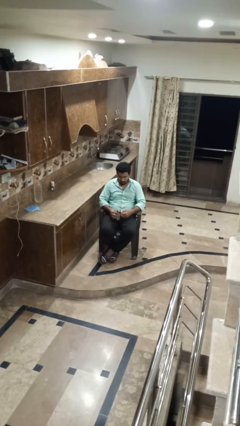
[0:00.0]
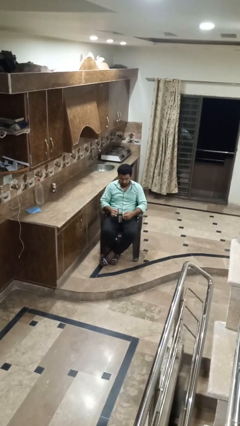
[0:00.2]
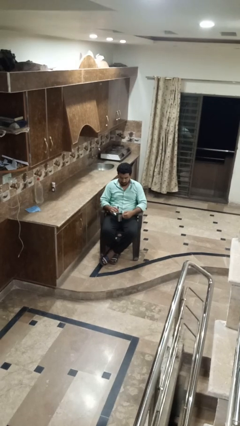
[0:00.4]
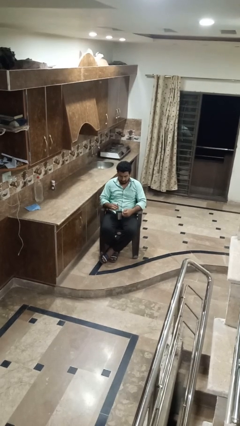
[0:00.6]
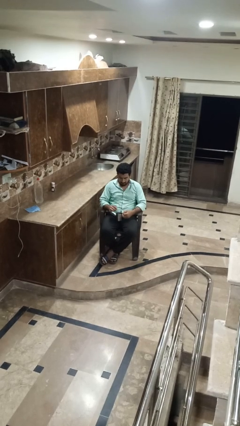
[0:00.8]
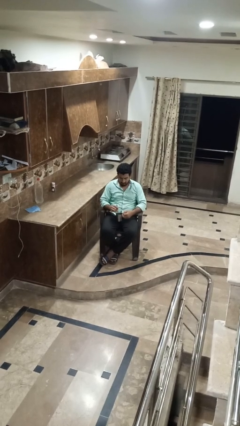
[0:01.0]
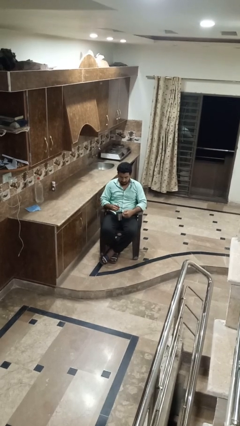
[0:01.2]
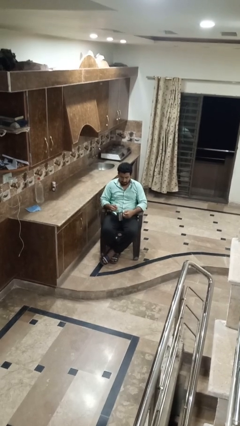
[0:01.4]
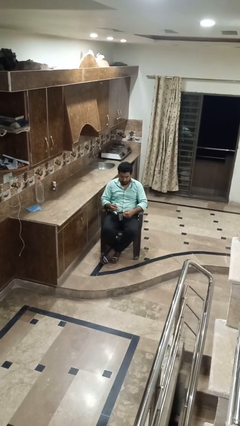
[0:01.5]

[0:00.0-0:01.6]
person stirs mug

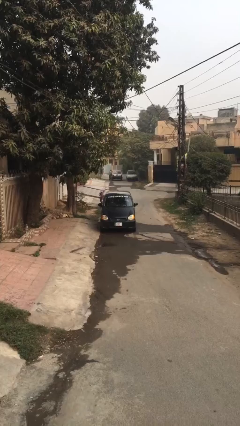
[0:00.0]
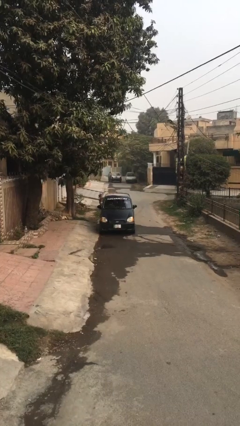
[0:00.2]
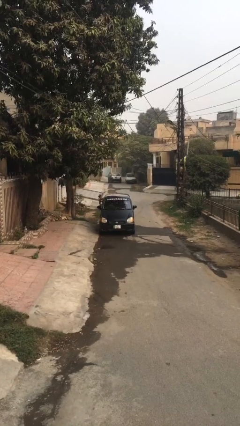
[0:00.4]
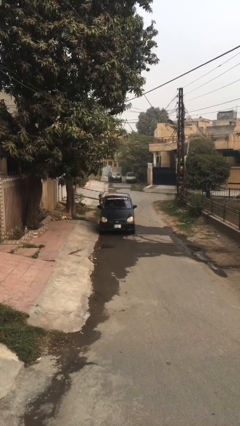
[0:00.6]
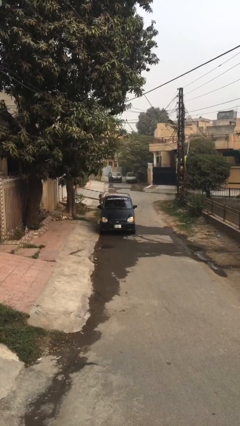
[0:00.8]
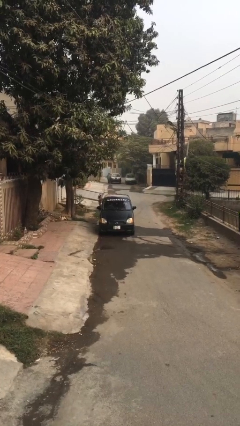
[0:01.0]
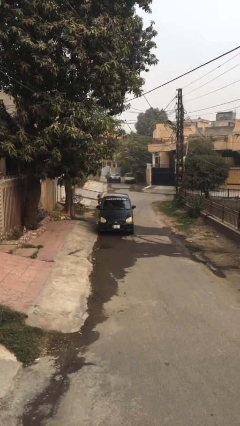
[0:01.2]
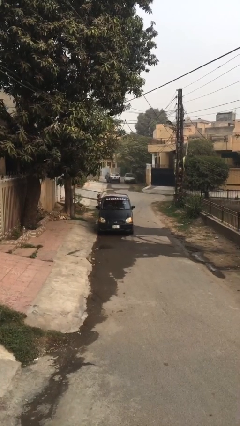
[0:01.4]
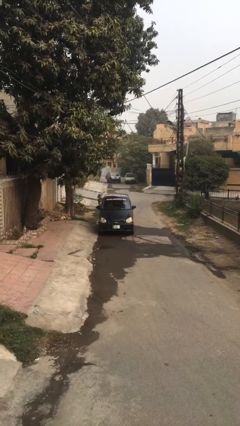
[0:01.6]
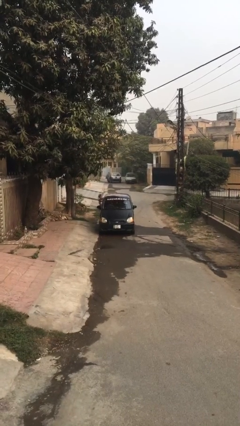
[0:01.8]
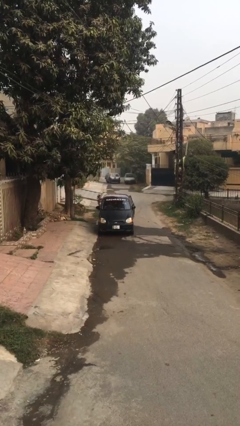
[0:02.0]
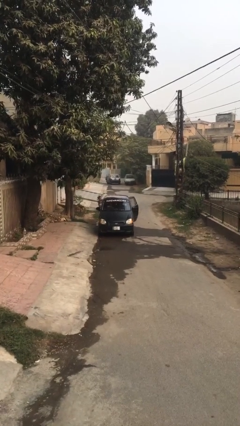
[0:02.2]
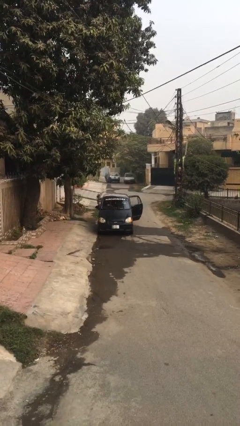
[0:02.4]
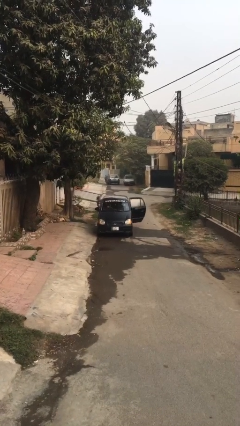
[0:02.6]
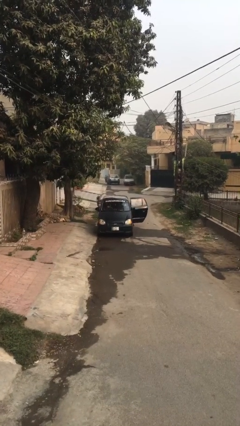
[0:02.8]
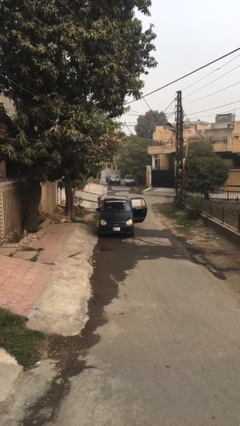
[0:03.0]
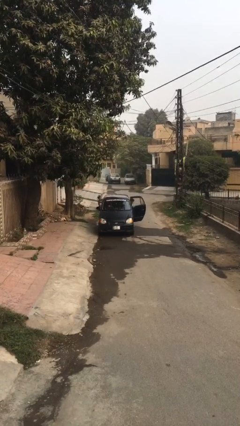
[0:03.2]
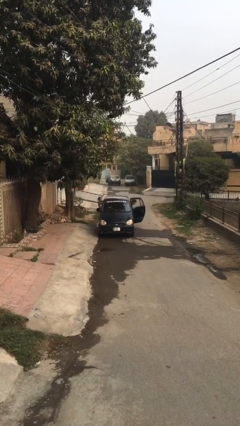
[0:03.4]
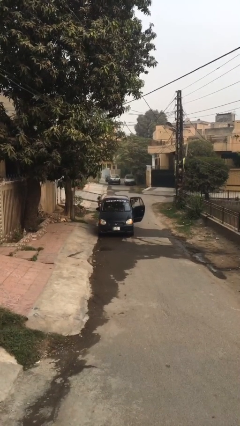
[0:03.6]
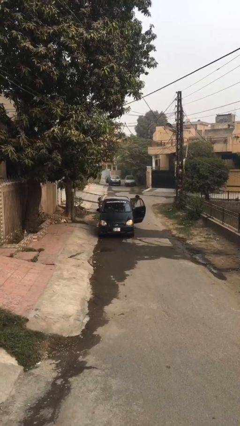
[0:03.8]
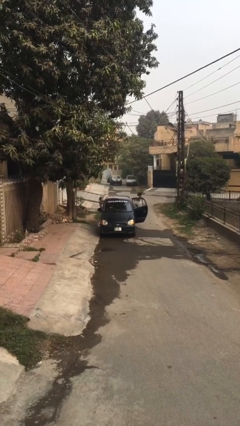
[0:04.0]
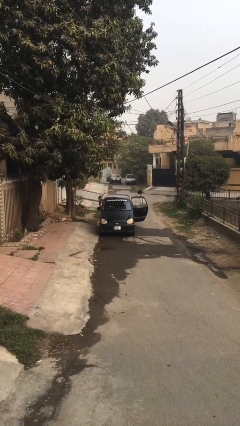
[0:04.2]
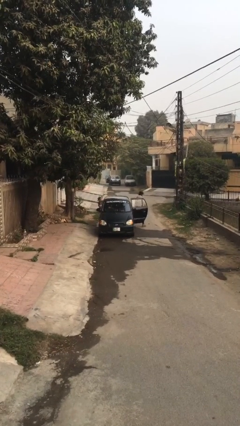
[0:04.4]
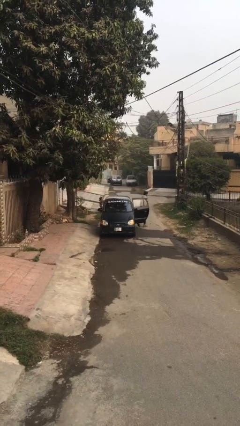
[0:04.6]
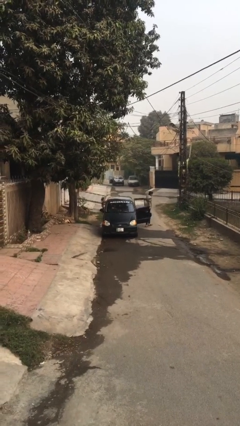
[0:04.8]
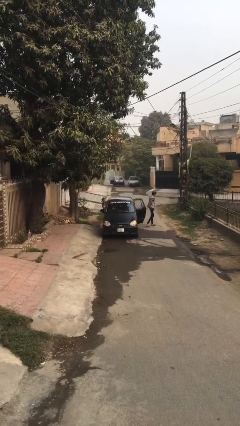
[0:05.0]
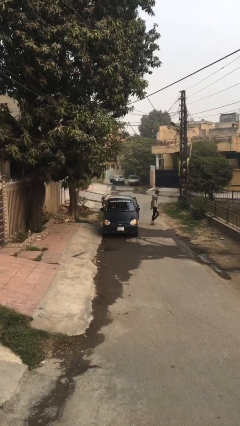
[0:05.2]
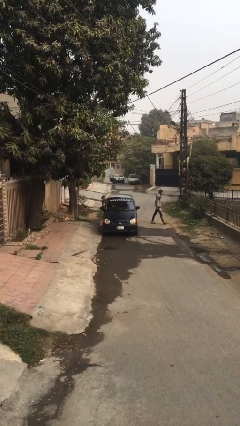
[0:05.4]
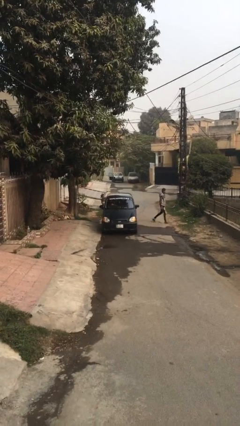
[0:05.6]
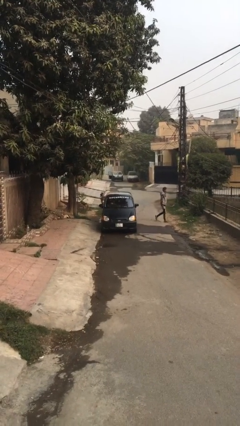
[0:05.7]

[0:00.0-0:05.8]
car drops off person

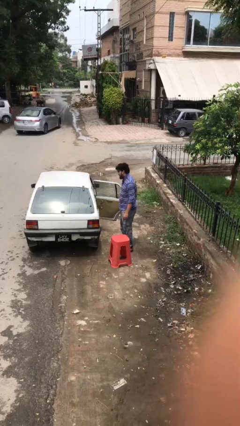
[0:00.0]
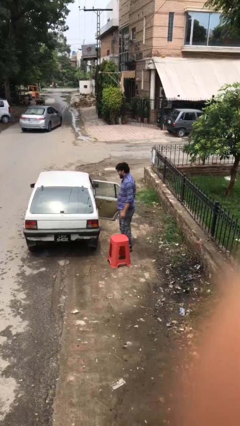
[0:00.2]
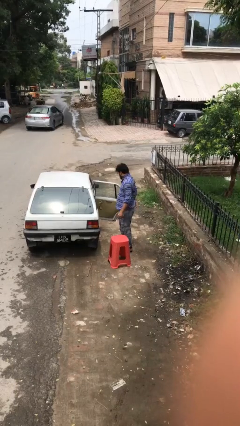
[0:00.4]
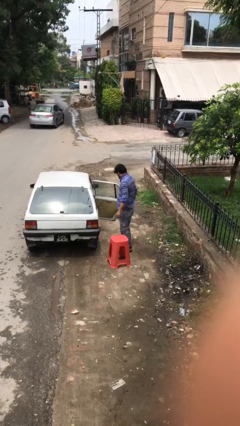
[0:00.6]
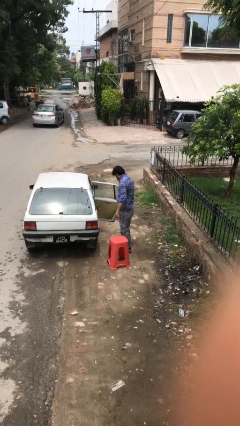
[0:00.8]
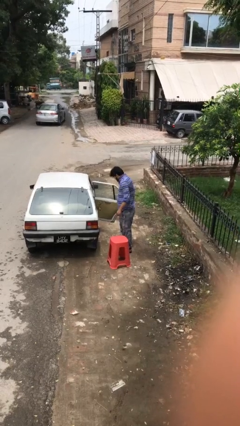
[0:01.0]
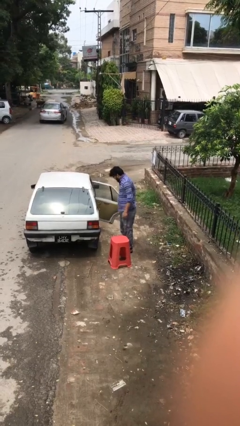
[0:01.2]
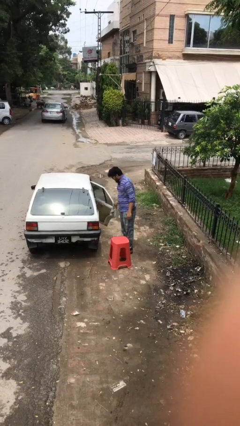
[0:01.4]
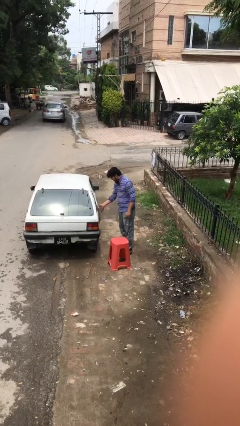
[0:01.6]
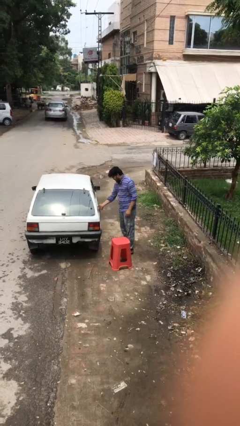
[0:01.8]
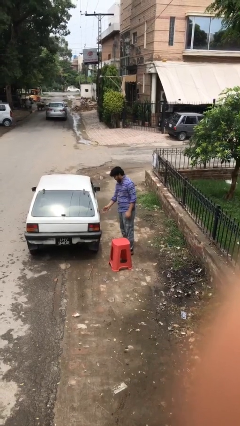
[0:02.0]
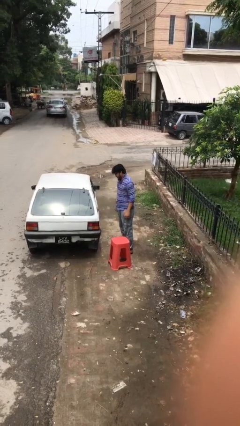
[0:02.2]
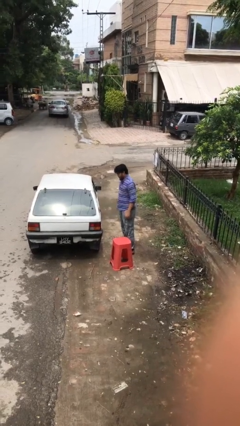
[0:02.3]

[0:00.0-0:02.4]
person closes car door

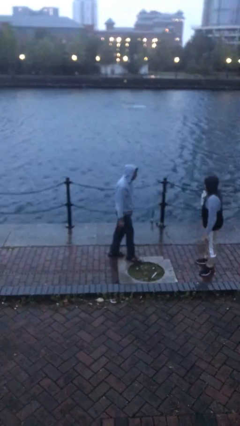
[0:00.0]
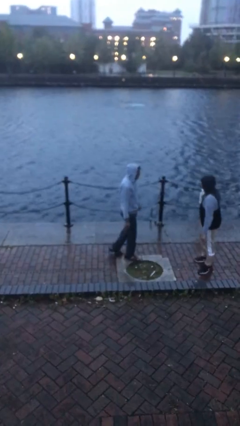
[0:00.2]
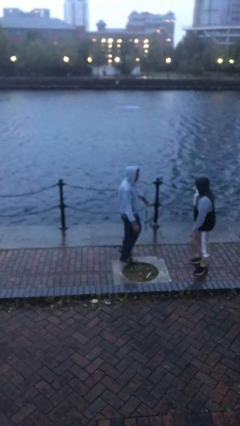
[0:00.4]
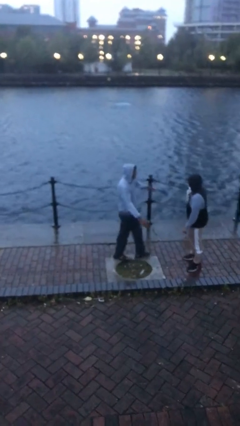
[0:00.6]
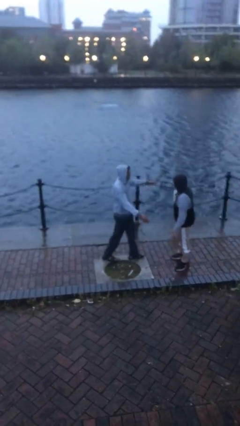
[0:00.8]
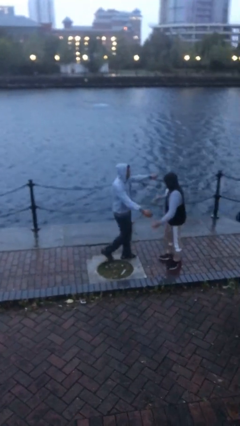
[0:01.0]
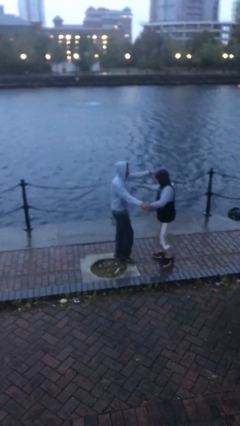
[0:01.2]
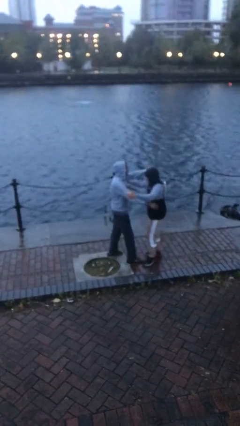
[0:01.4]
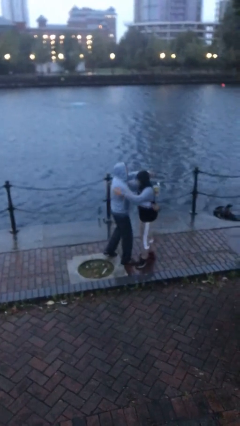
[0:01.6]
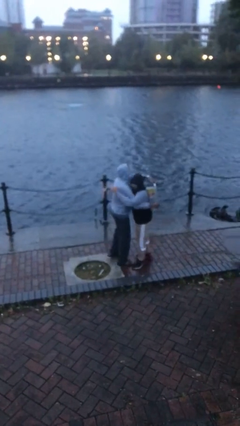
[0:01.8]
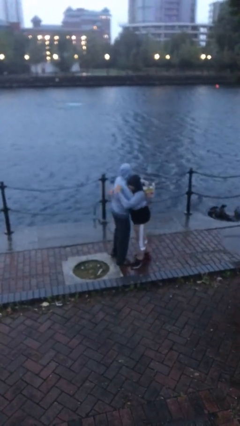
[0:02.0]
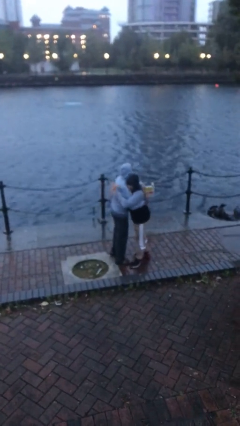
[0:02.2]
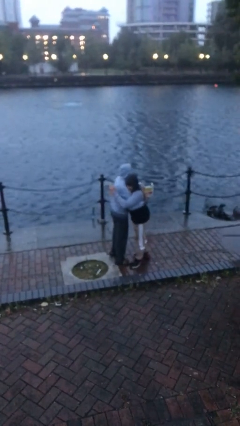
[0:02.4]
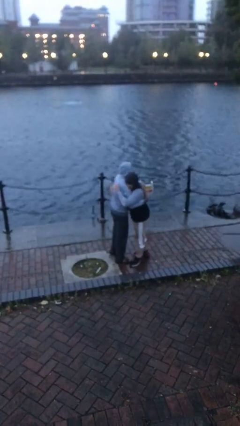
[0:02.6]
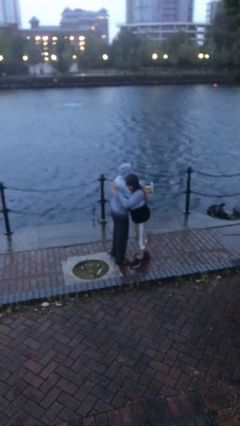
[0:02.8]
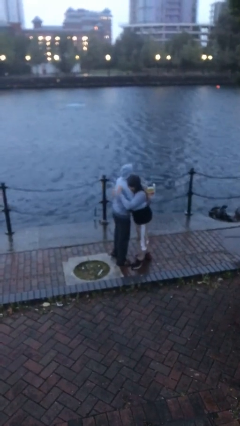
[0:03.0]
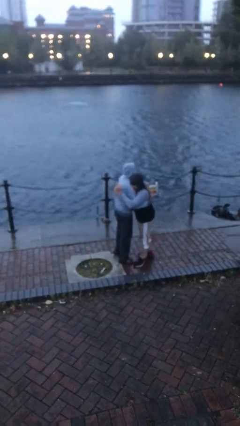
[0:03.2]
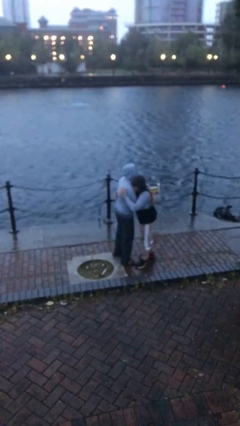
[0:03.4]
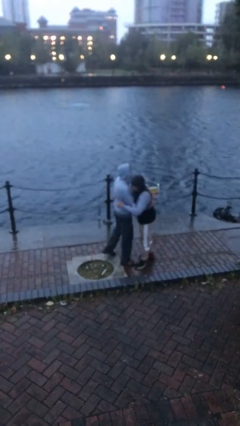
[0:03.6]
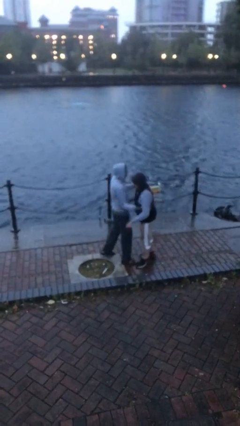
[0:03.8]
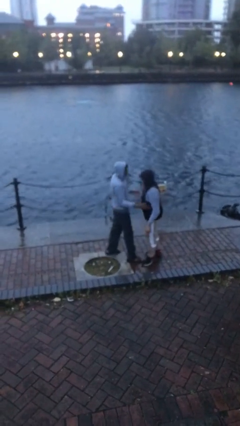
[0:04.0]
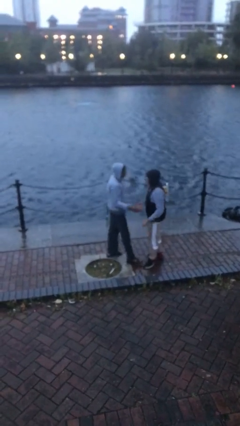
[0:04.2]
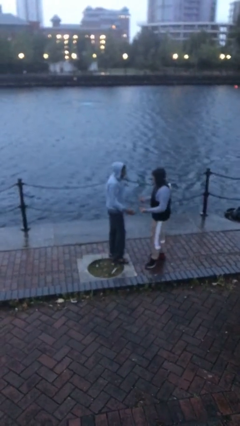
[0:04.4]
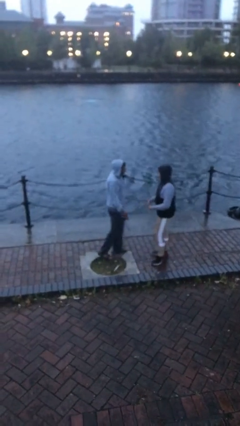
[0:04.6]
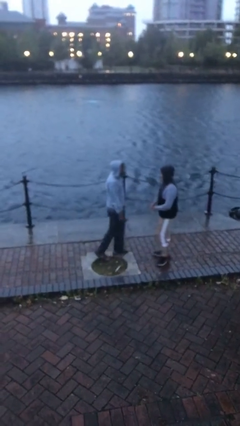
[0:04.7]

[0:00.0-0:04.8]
person embraces person

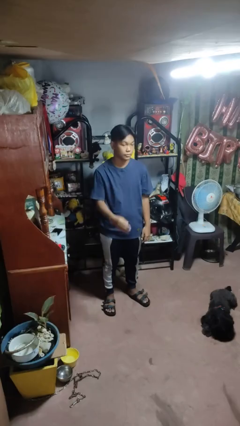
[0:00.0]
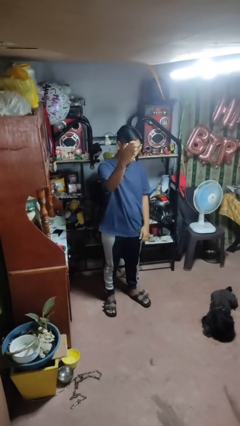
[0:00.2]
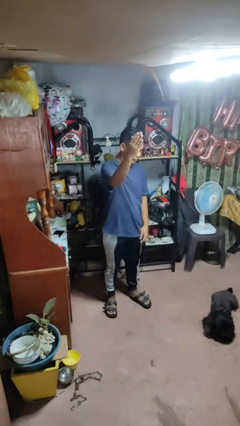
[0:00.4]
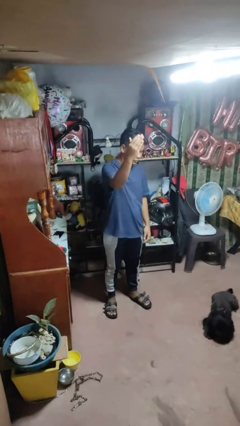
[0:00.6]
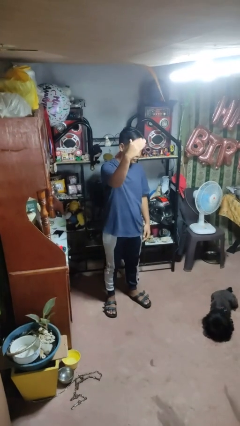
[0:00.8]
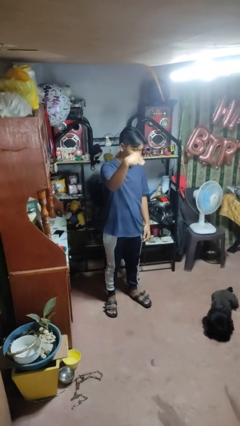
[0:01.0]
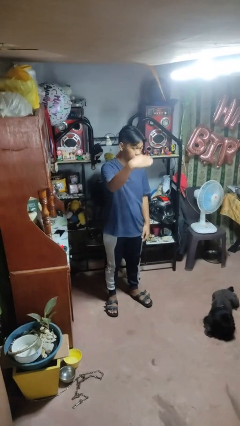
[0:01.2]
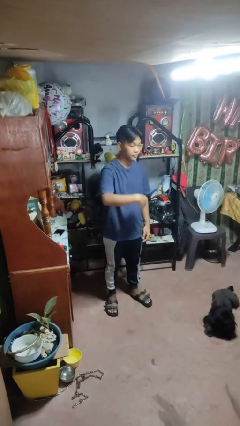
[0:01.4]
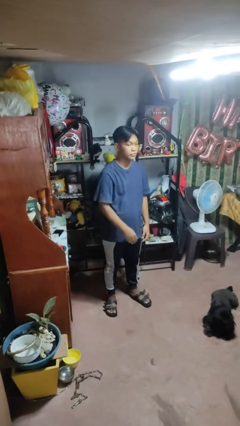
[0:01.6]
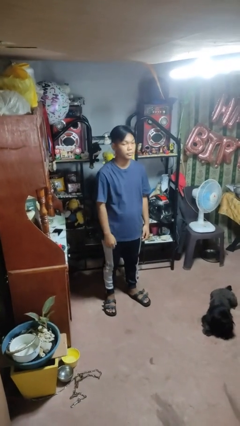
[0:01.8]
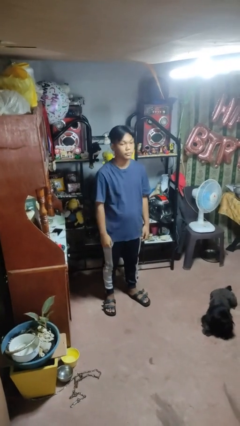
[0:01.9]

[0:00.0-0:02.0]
person gestures come here

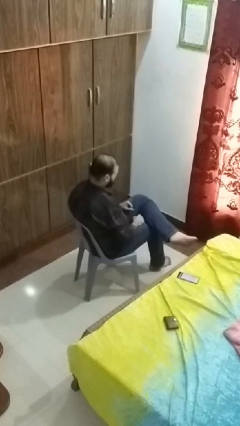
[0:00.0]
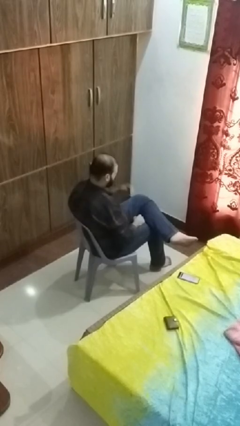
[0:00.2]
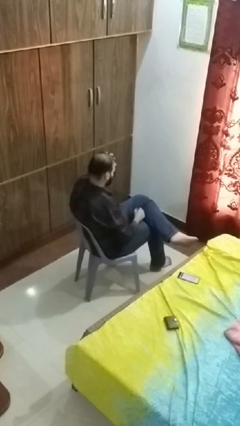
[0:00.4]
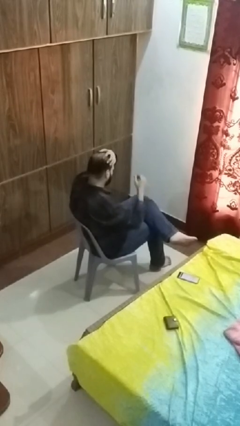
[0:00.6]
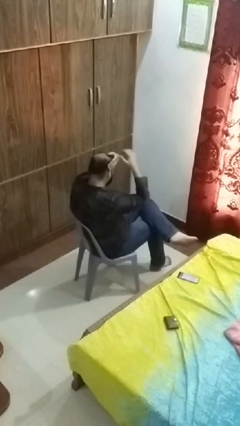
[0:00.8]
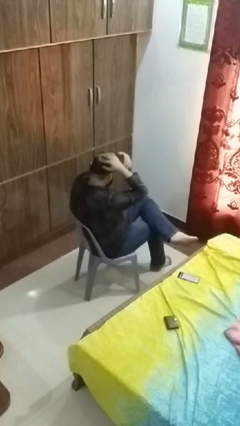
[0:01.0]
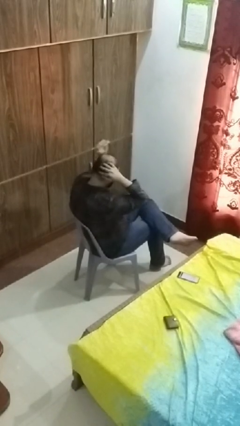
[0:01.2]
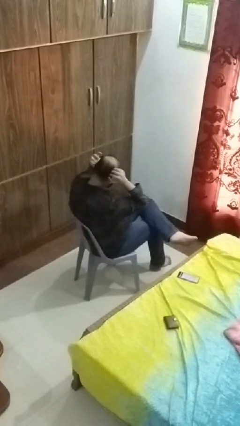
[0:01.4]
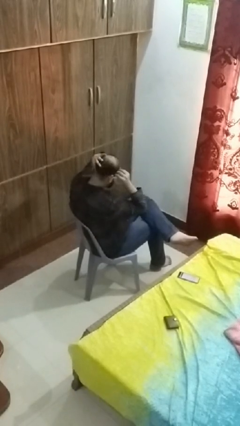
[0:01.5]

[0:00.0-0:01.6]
person strokes hair
